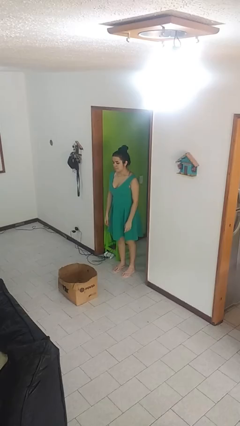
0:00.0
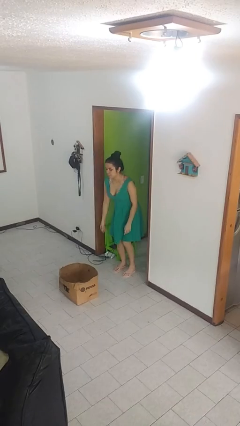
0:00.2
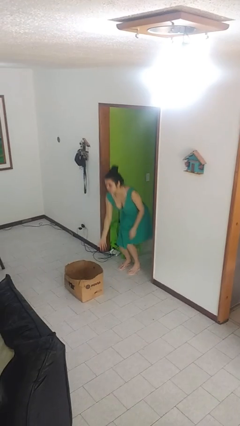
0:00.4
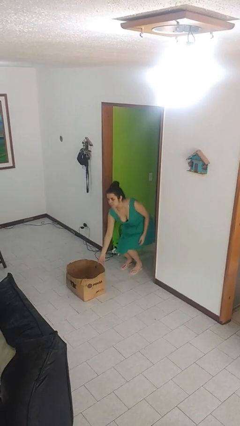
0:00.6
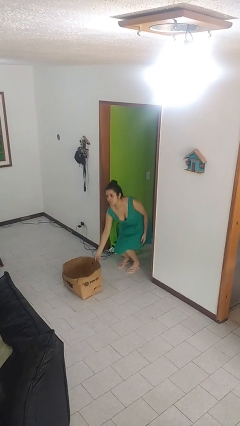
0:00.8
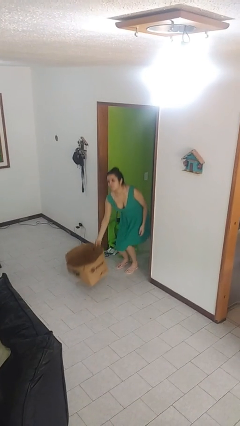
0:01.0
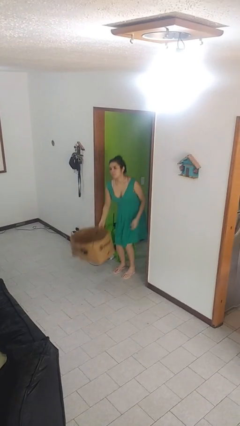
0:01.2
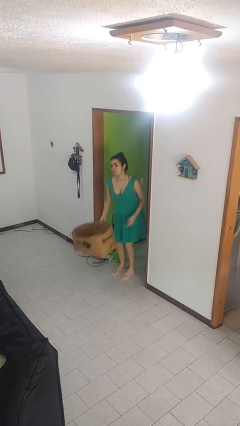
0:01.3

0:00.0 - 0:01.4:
person picks up object from floor

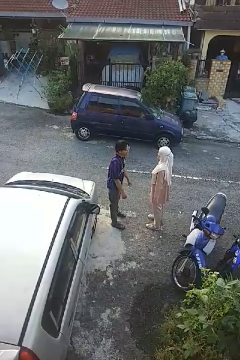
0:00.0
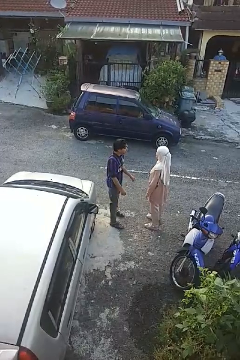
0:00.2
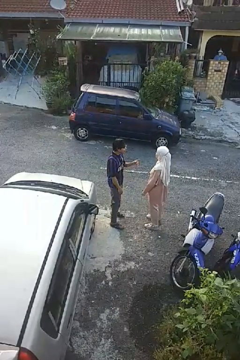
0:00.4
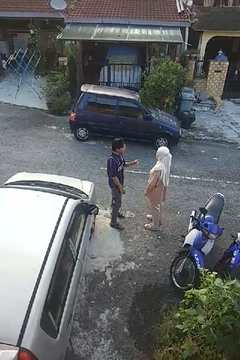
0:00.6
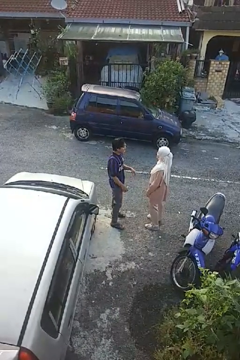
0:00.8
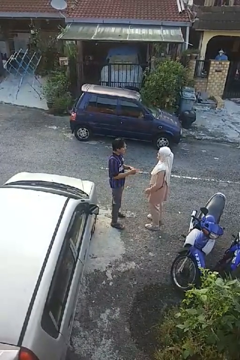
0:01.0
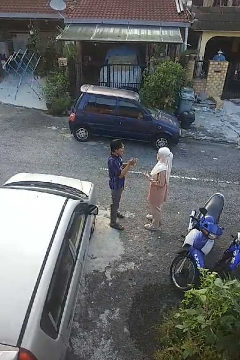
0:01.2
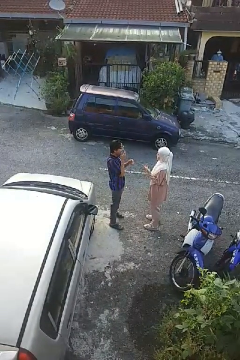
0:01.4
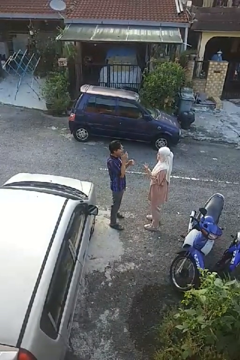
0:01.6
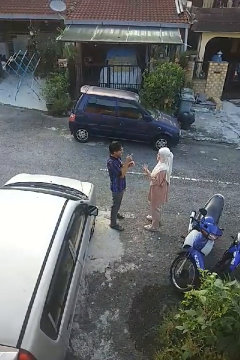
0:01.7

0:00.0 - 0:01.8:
person laughs with person

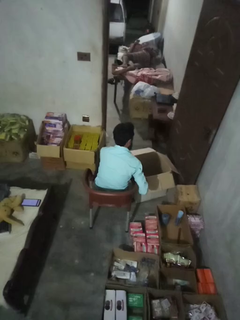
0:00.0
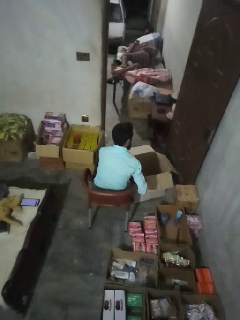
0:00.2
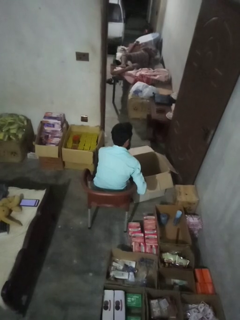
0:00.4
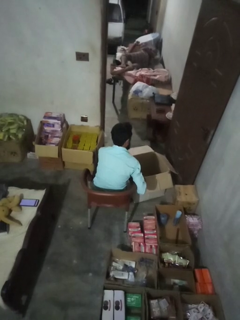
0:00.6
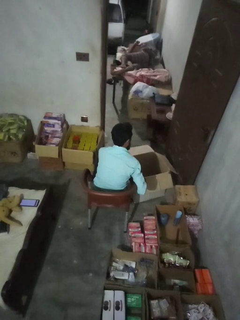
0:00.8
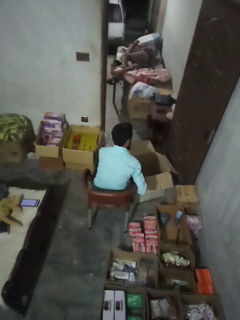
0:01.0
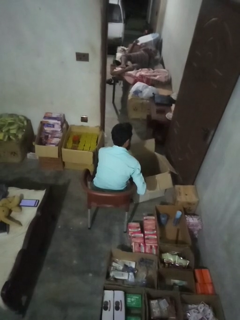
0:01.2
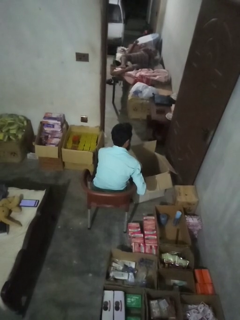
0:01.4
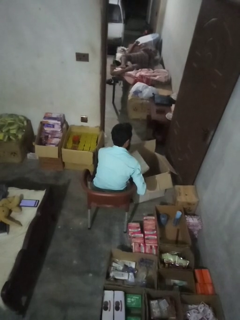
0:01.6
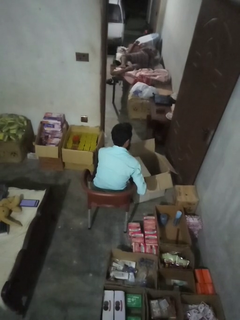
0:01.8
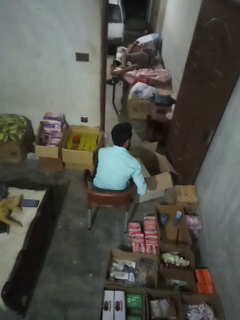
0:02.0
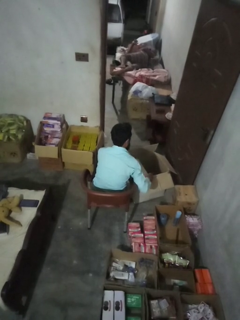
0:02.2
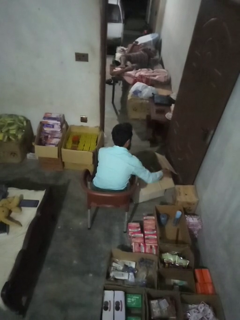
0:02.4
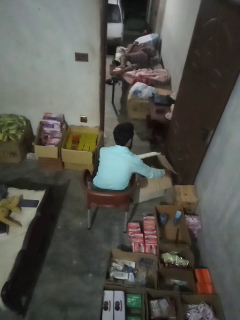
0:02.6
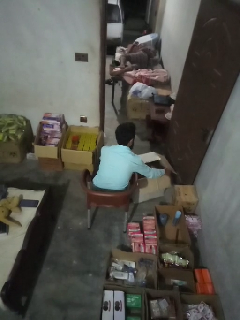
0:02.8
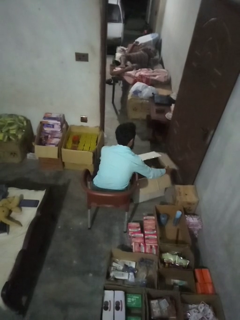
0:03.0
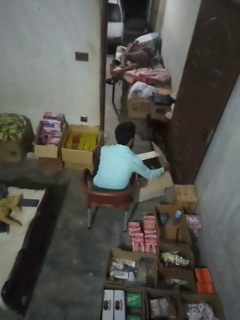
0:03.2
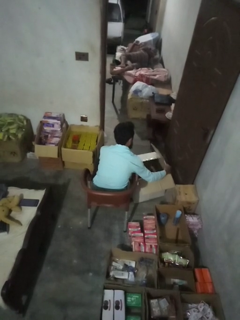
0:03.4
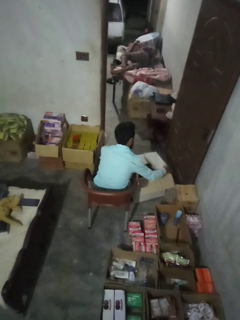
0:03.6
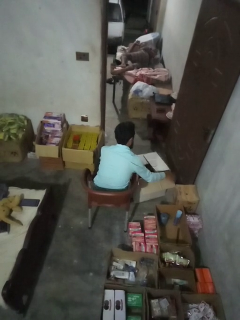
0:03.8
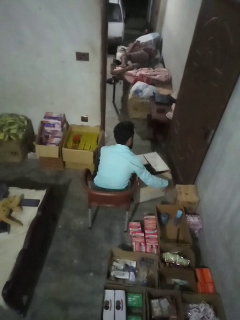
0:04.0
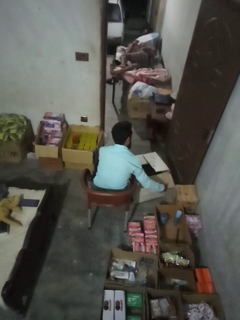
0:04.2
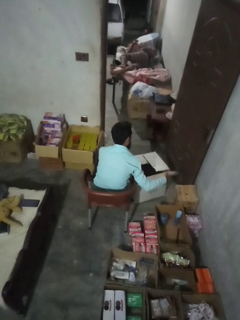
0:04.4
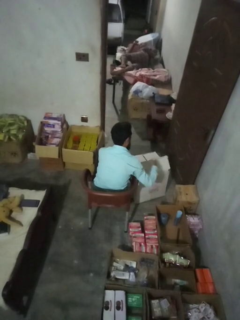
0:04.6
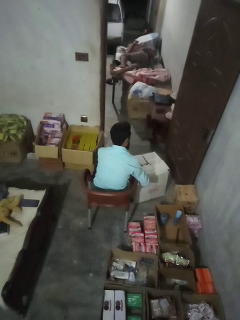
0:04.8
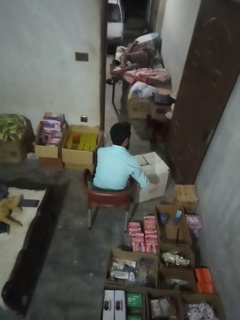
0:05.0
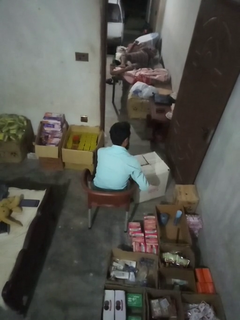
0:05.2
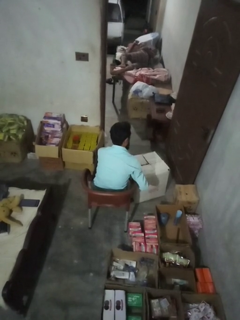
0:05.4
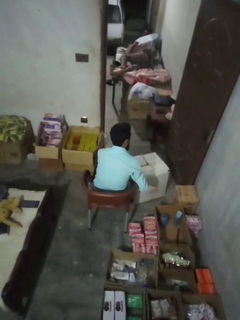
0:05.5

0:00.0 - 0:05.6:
person closes box

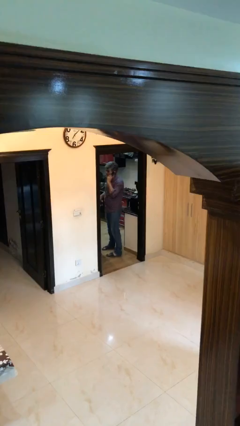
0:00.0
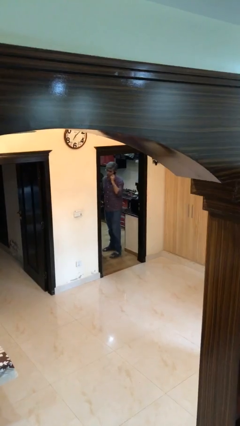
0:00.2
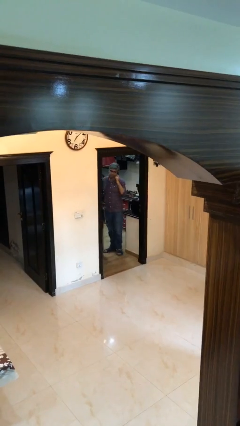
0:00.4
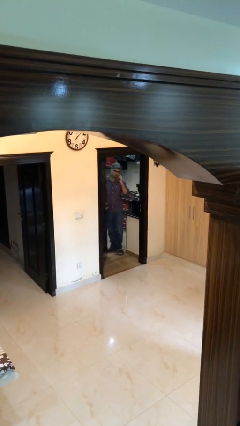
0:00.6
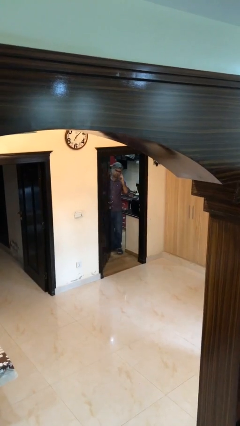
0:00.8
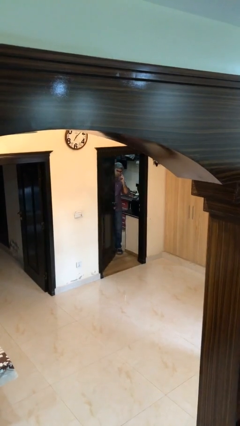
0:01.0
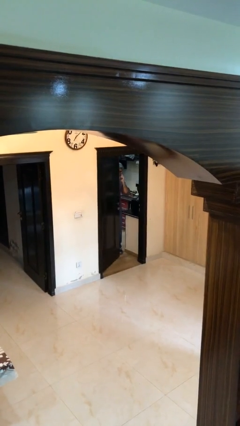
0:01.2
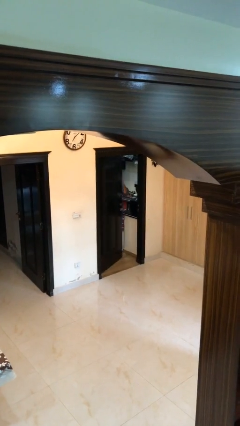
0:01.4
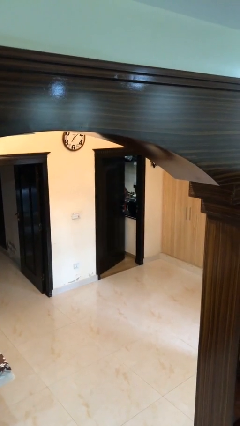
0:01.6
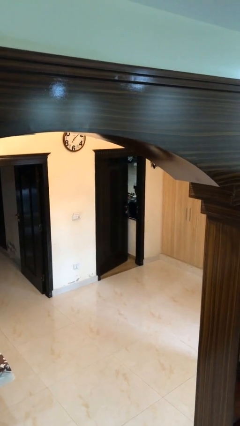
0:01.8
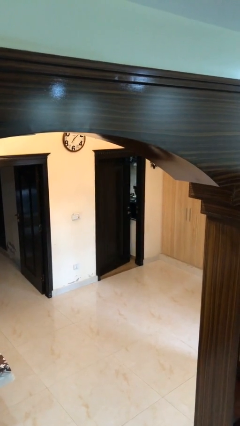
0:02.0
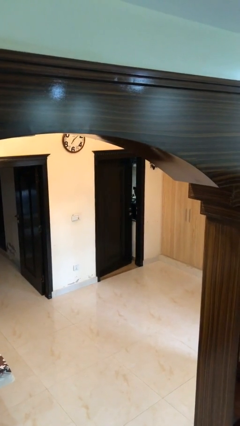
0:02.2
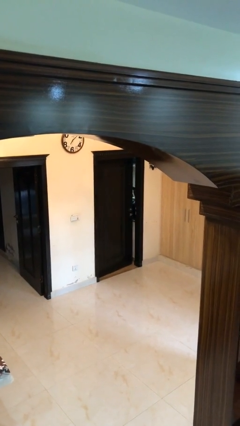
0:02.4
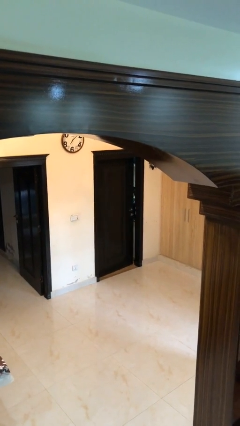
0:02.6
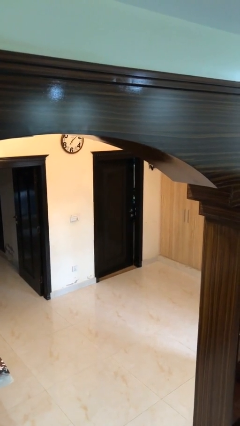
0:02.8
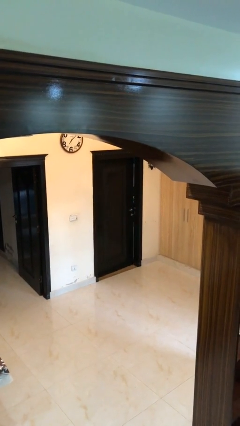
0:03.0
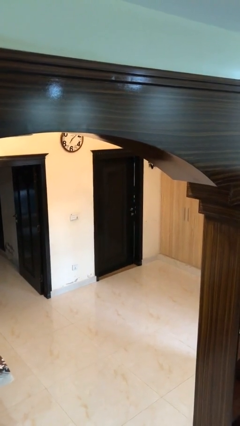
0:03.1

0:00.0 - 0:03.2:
person closes facility door

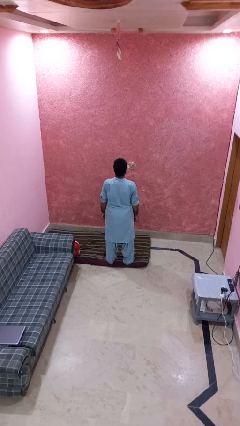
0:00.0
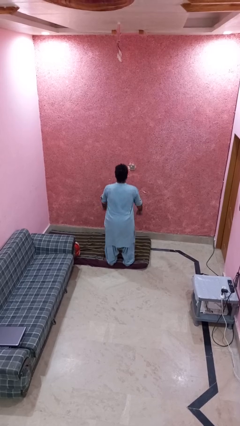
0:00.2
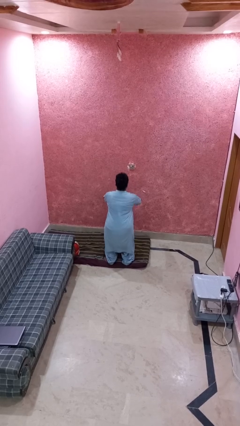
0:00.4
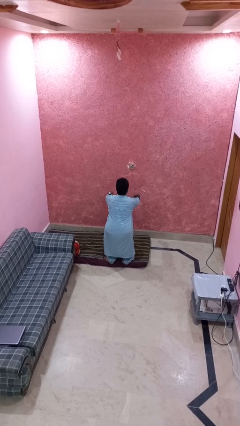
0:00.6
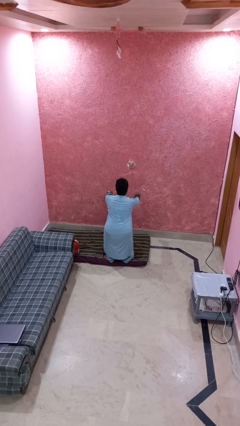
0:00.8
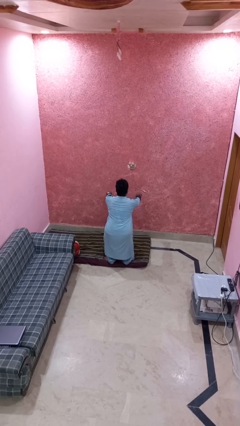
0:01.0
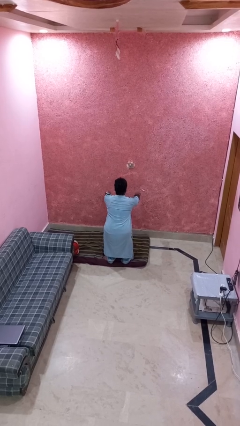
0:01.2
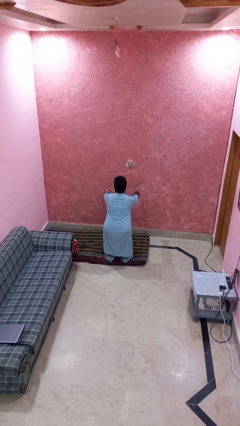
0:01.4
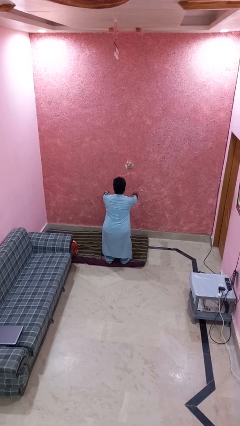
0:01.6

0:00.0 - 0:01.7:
person squats

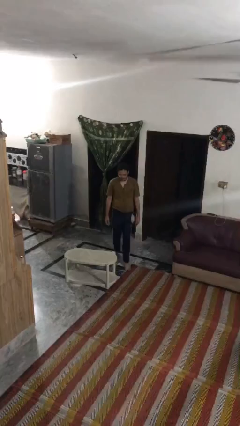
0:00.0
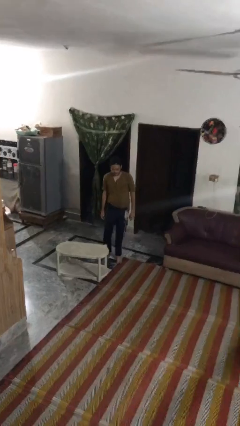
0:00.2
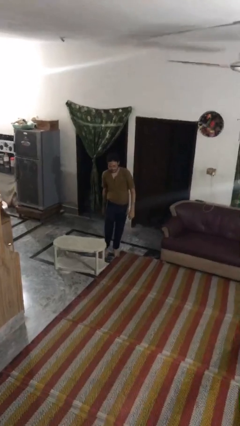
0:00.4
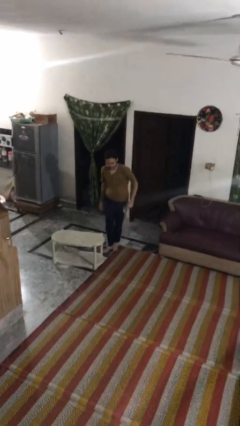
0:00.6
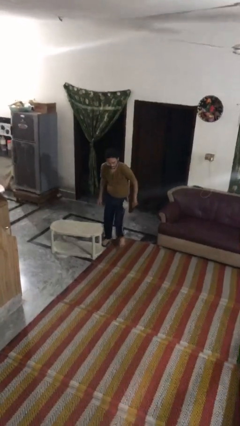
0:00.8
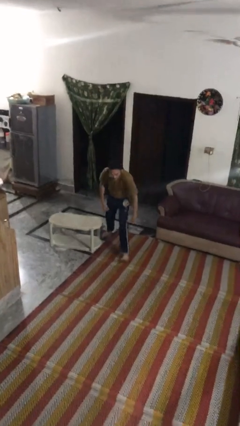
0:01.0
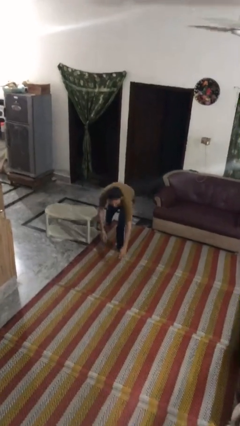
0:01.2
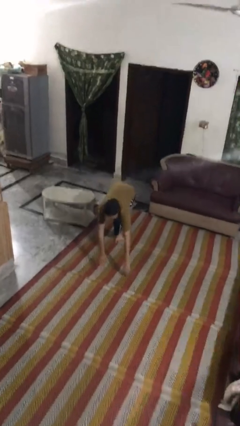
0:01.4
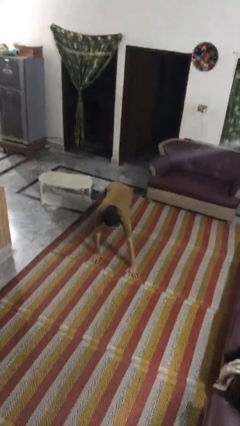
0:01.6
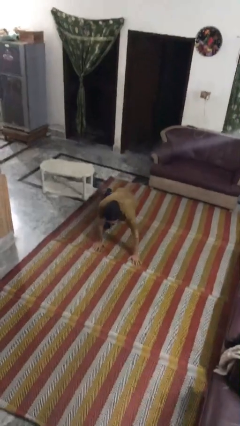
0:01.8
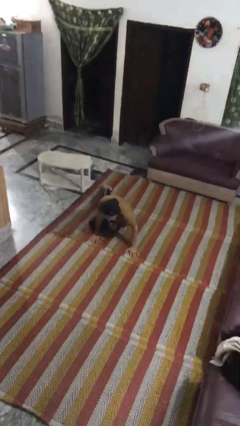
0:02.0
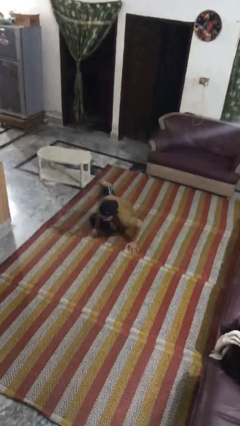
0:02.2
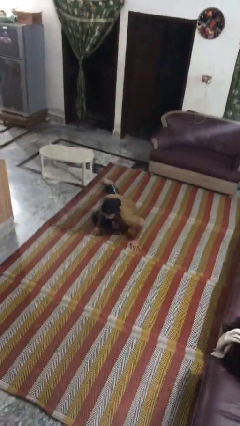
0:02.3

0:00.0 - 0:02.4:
person trips on object on floor

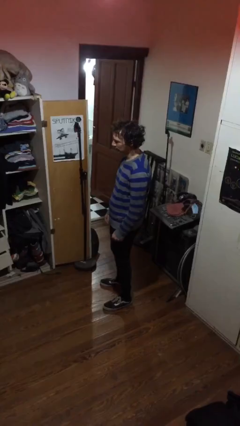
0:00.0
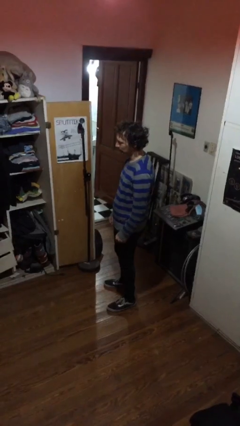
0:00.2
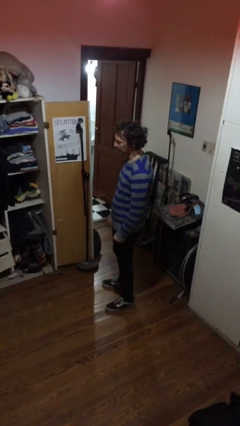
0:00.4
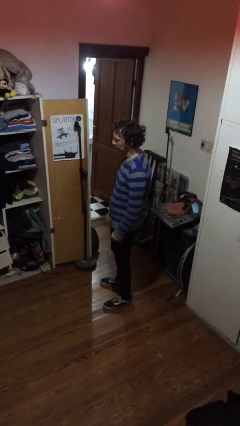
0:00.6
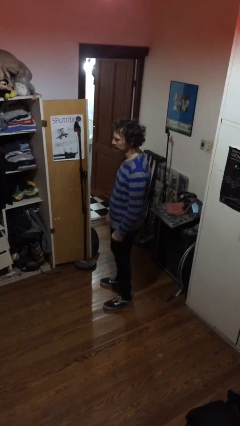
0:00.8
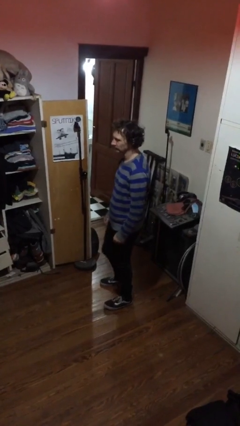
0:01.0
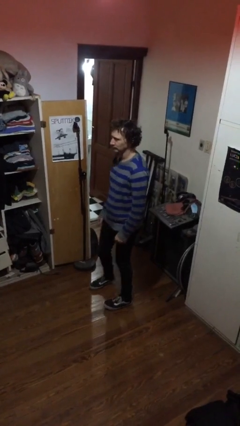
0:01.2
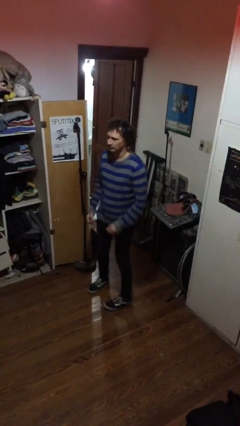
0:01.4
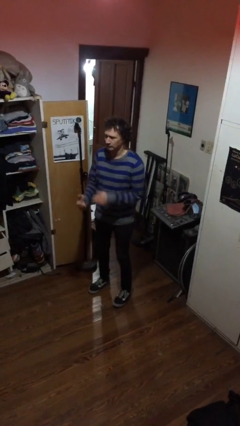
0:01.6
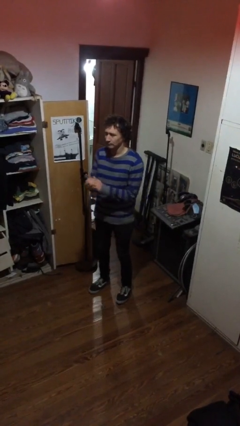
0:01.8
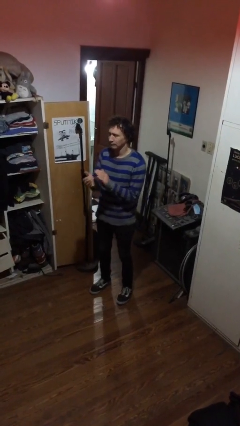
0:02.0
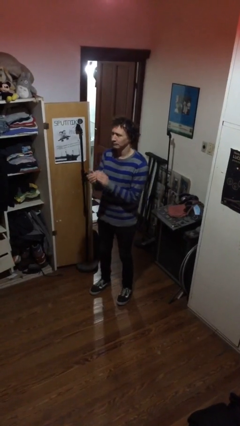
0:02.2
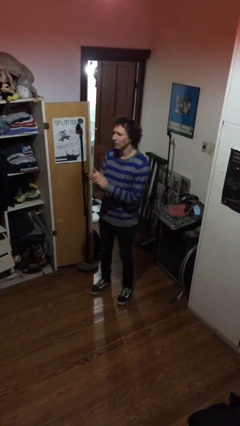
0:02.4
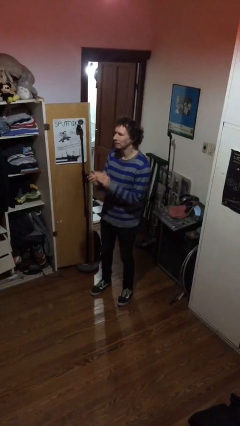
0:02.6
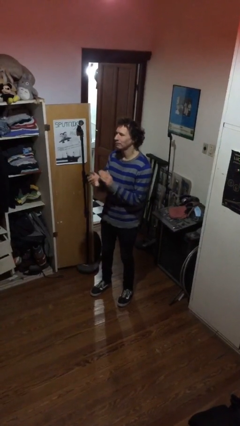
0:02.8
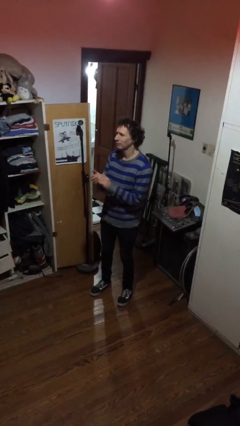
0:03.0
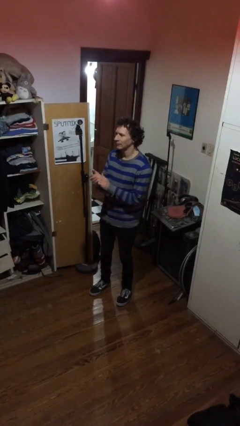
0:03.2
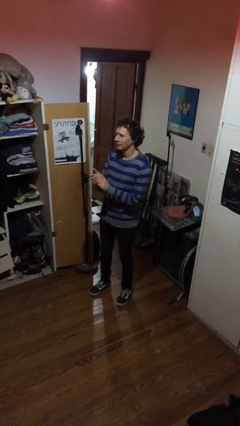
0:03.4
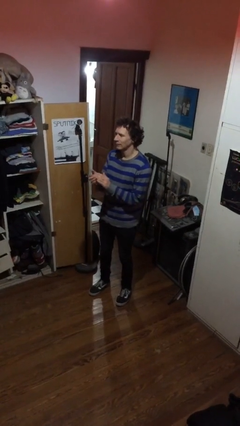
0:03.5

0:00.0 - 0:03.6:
person claps hands
